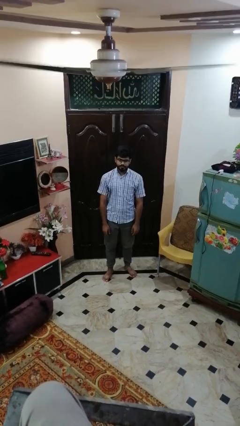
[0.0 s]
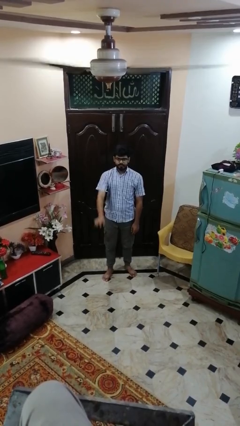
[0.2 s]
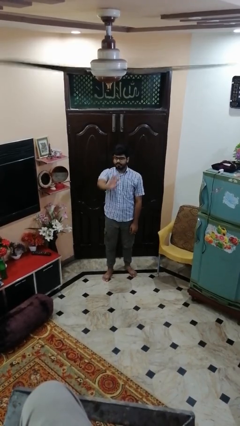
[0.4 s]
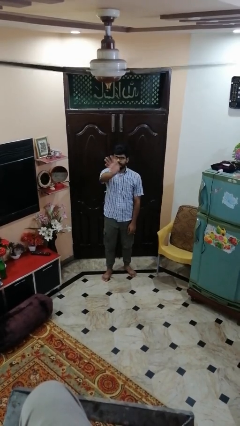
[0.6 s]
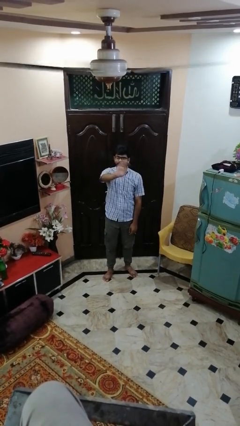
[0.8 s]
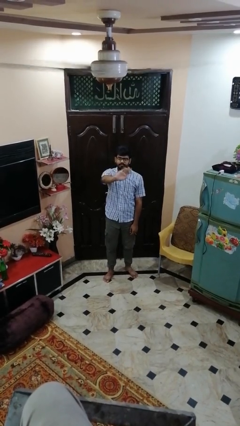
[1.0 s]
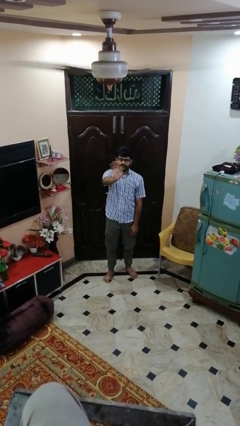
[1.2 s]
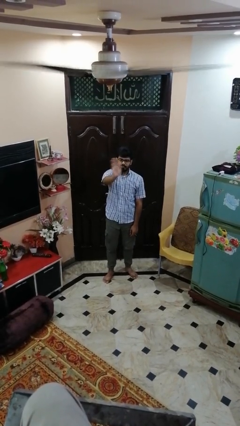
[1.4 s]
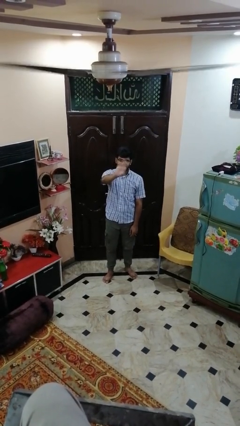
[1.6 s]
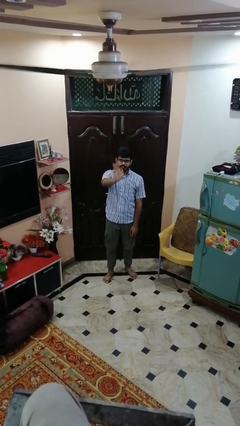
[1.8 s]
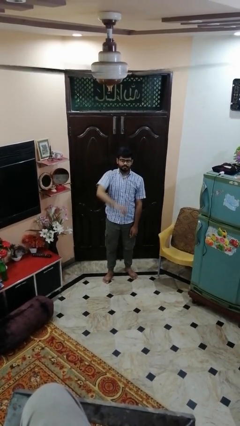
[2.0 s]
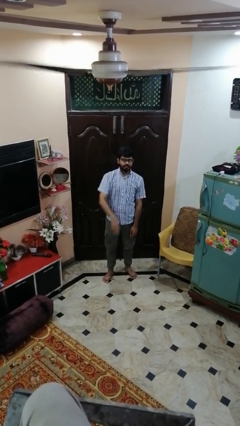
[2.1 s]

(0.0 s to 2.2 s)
person waves at person

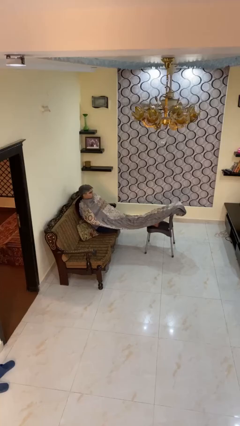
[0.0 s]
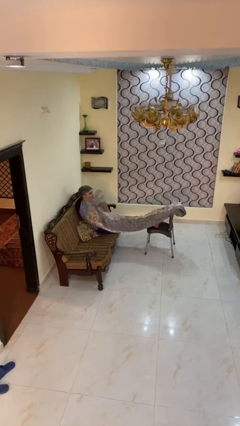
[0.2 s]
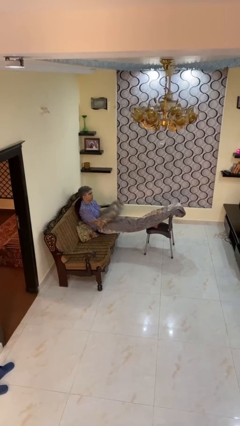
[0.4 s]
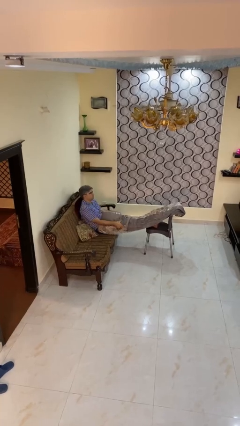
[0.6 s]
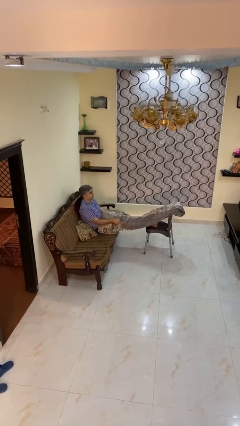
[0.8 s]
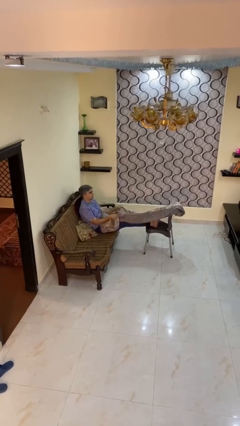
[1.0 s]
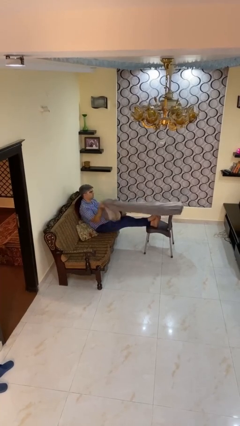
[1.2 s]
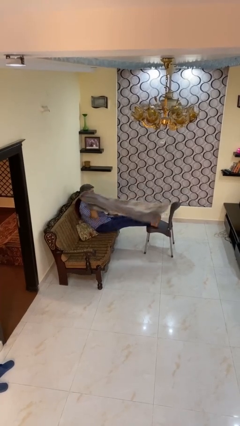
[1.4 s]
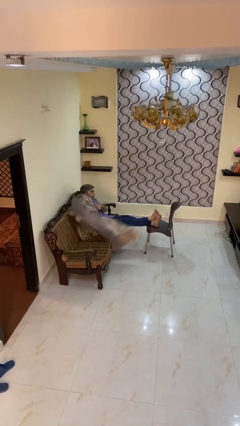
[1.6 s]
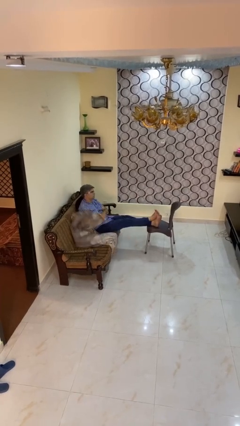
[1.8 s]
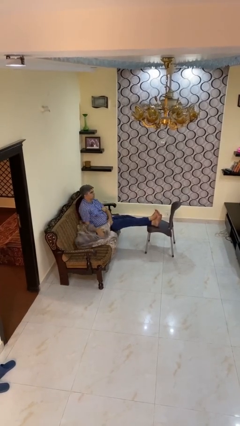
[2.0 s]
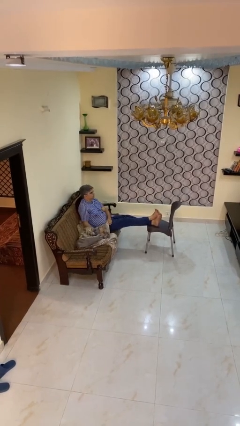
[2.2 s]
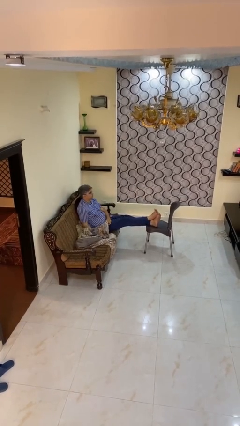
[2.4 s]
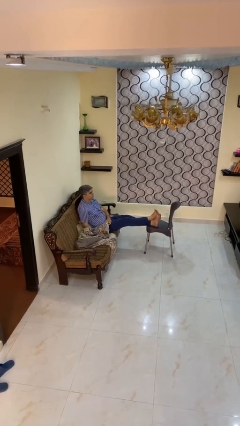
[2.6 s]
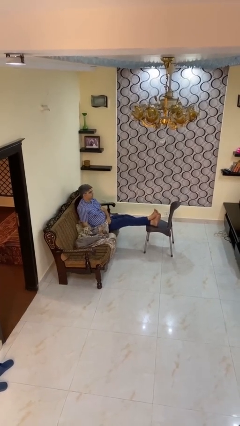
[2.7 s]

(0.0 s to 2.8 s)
person uncovers with blanket

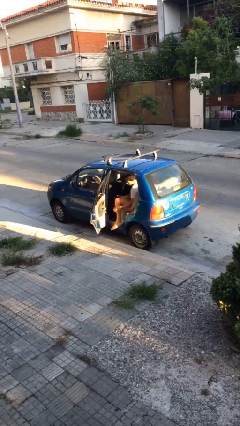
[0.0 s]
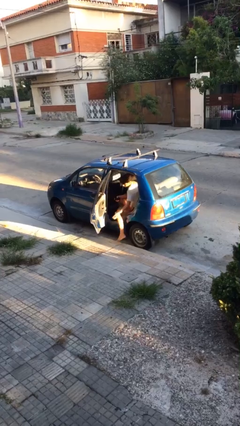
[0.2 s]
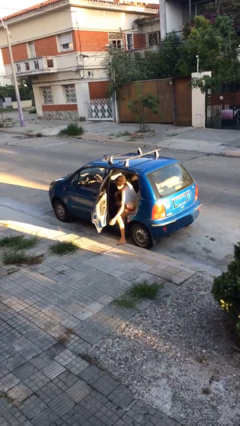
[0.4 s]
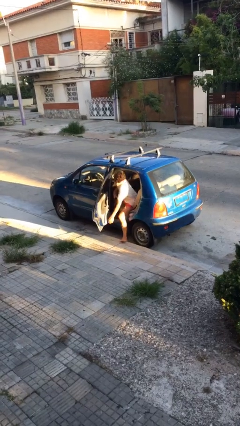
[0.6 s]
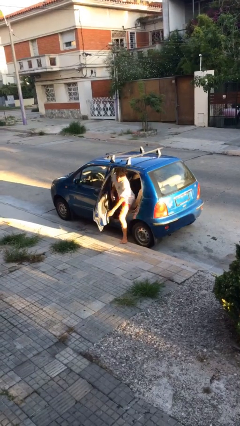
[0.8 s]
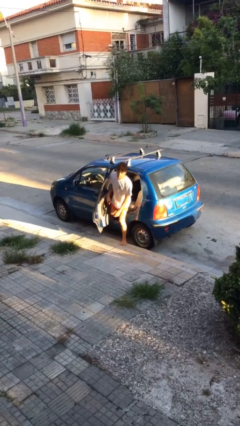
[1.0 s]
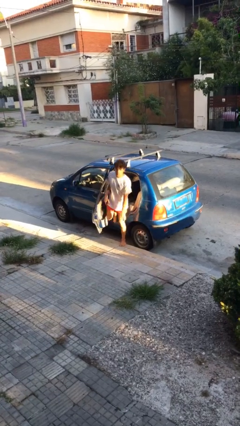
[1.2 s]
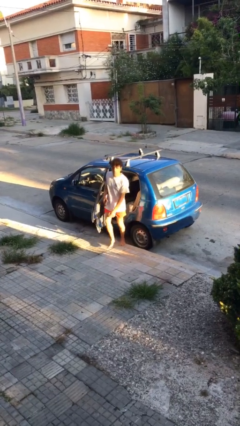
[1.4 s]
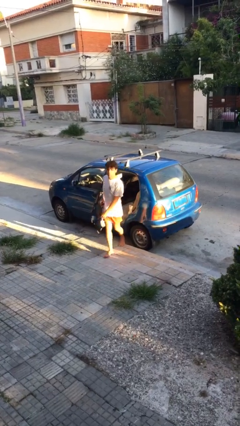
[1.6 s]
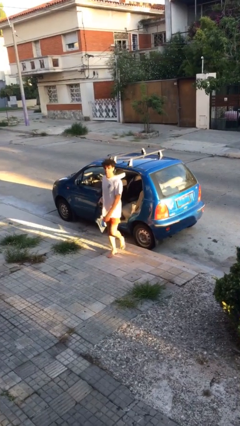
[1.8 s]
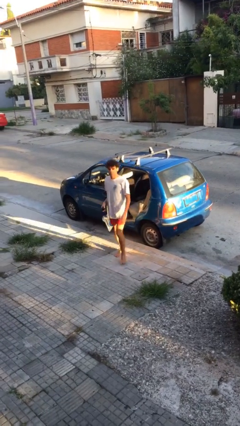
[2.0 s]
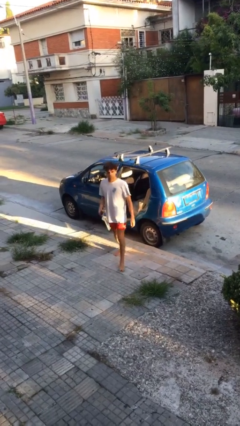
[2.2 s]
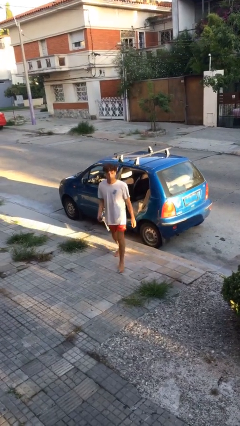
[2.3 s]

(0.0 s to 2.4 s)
person exits car

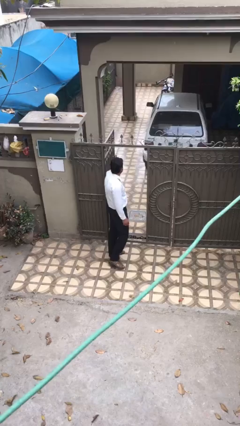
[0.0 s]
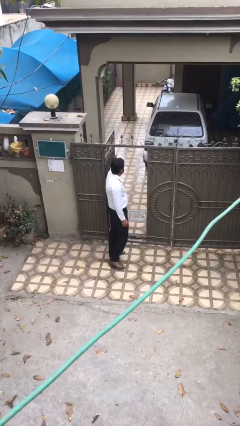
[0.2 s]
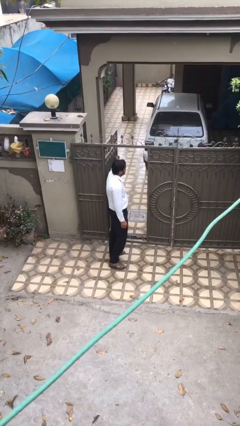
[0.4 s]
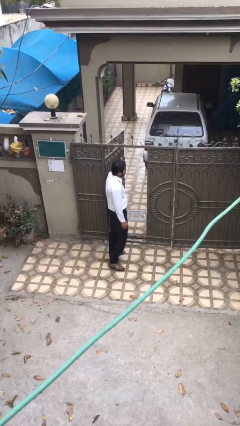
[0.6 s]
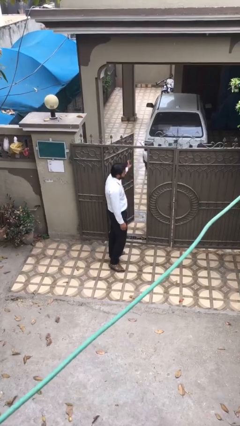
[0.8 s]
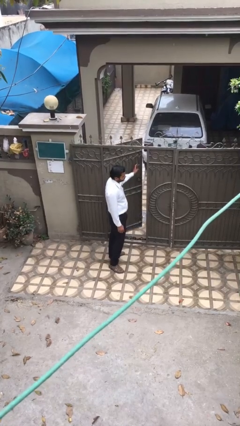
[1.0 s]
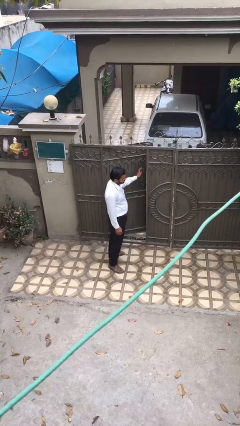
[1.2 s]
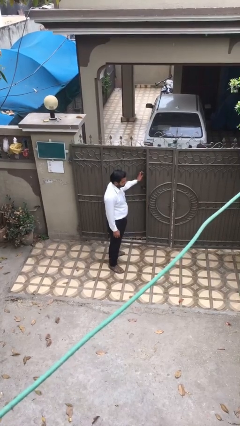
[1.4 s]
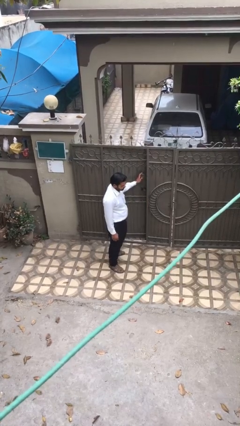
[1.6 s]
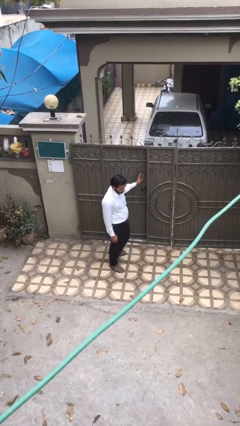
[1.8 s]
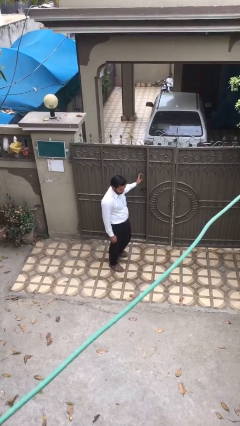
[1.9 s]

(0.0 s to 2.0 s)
person closes facility door

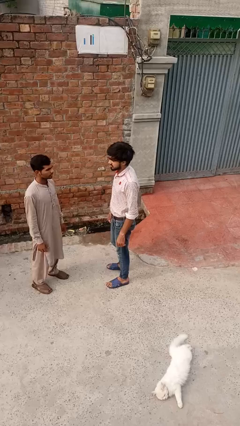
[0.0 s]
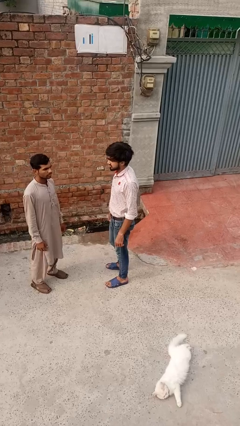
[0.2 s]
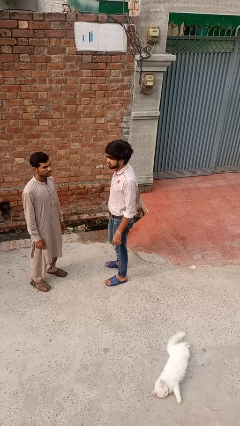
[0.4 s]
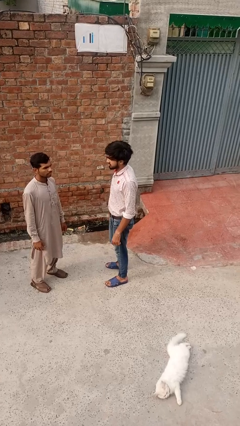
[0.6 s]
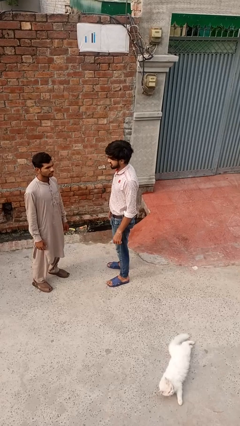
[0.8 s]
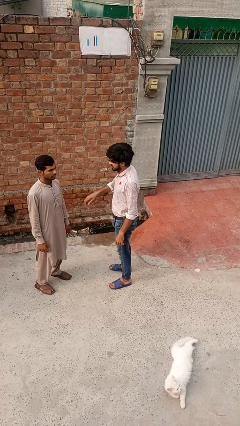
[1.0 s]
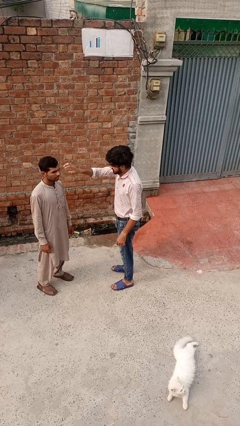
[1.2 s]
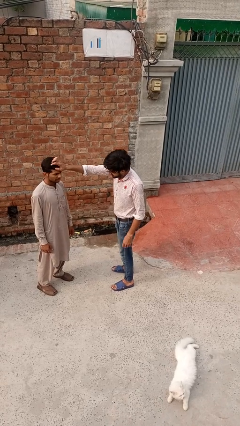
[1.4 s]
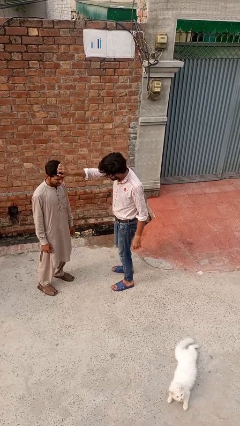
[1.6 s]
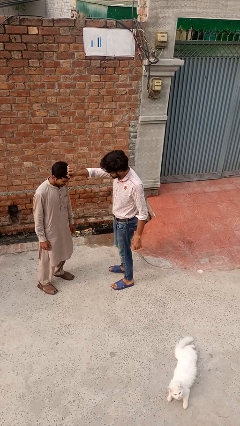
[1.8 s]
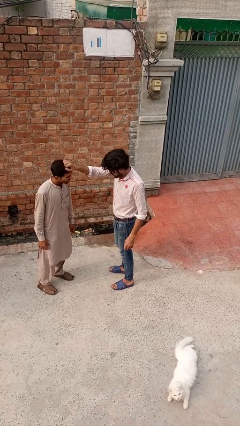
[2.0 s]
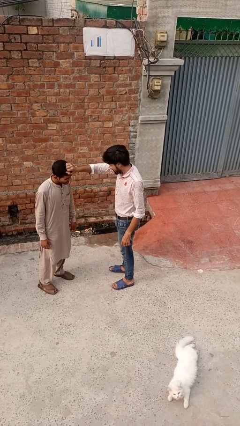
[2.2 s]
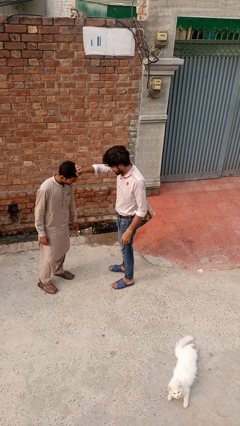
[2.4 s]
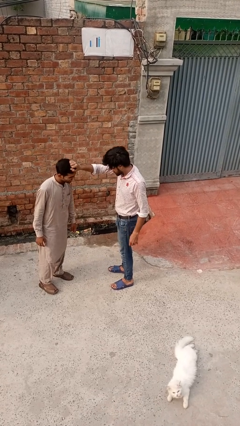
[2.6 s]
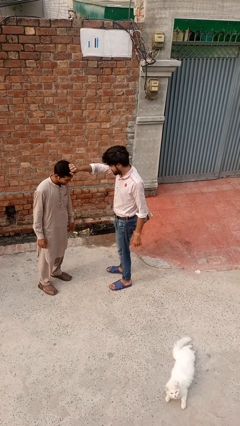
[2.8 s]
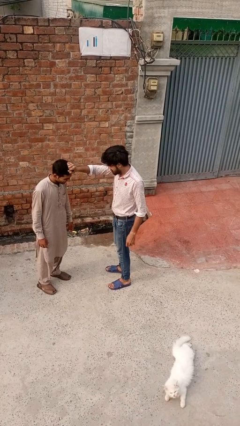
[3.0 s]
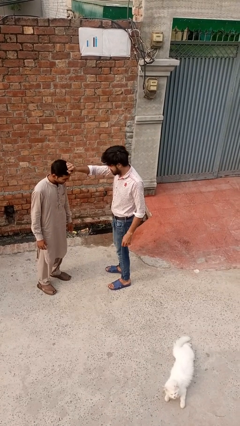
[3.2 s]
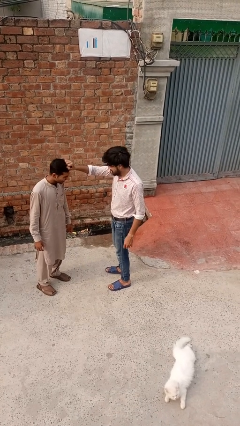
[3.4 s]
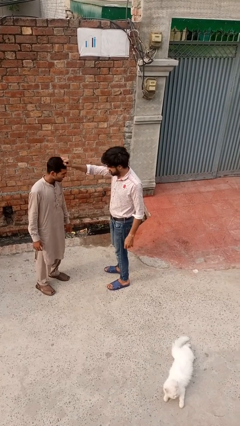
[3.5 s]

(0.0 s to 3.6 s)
person grabs person by hair

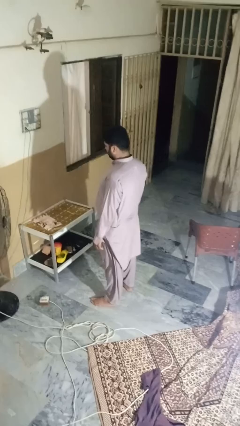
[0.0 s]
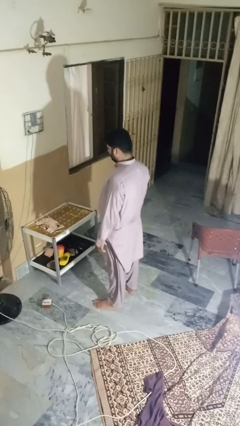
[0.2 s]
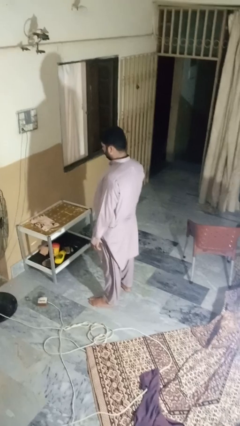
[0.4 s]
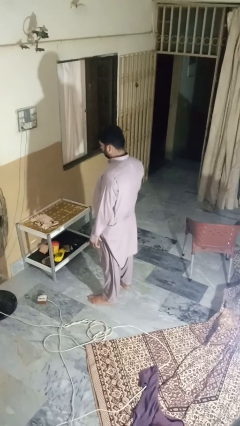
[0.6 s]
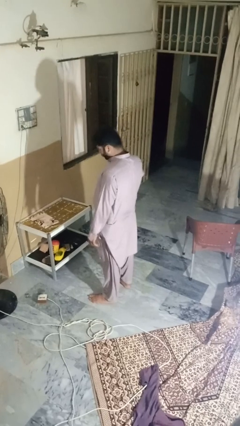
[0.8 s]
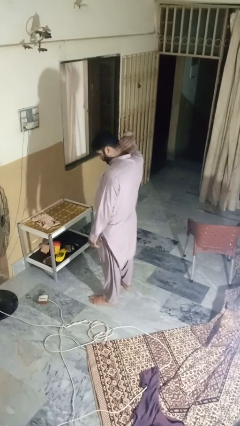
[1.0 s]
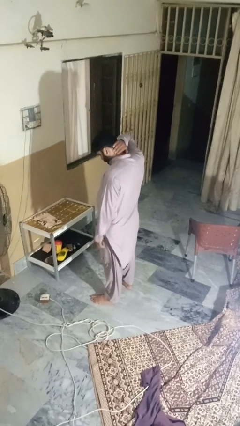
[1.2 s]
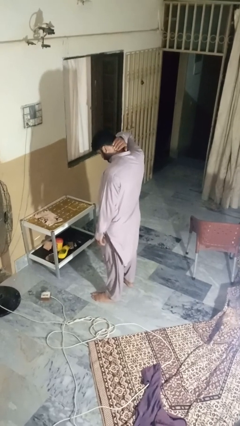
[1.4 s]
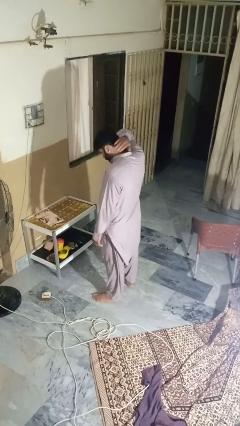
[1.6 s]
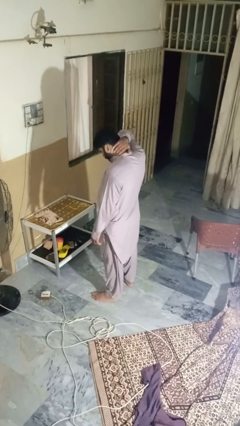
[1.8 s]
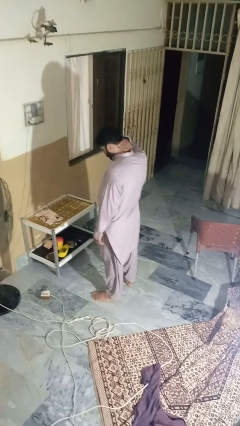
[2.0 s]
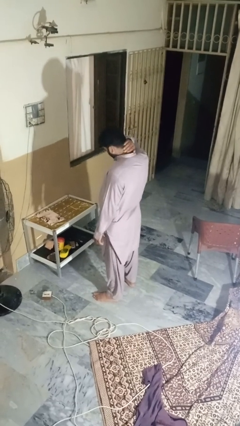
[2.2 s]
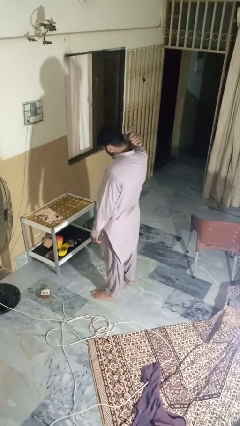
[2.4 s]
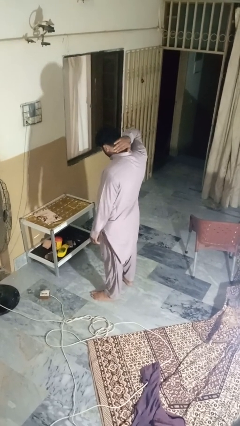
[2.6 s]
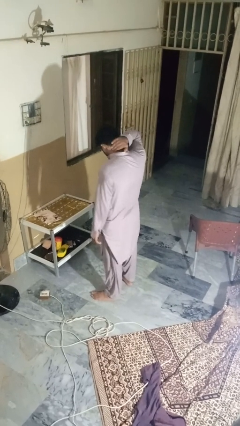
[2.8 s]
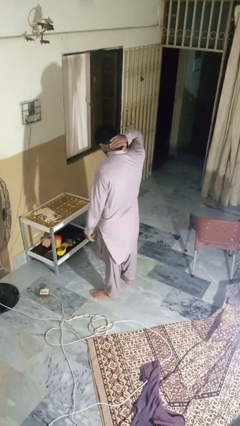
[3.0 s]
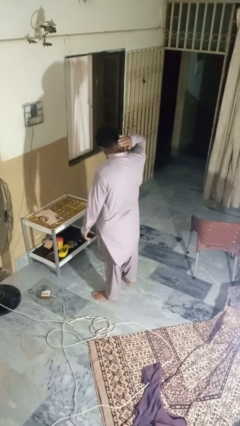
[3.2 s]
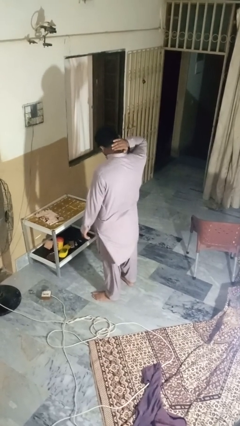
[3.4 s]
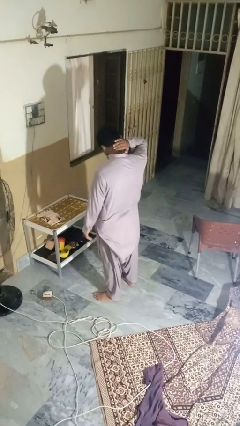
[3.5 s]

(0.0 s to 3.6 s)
person rubs neck

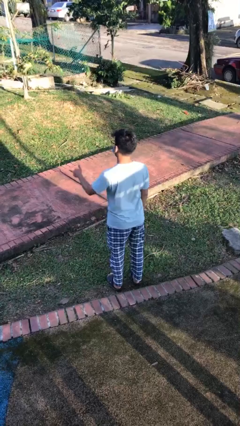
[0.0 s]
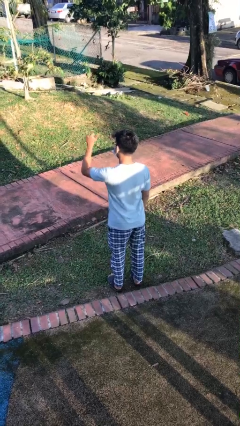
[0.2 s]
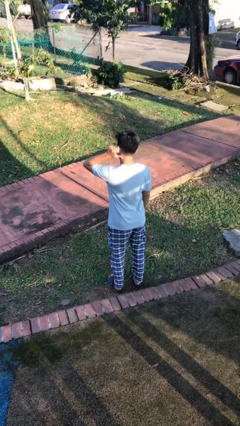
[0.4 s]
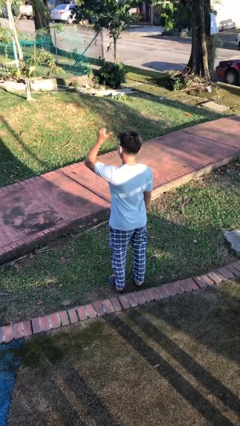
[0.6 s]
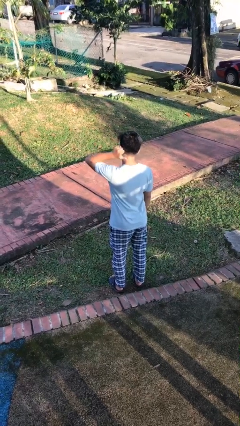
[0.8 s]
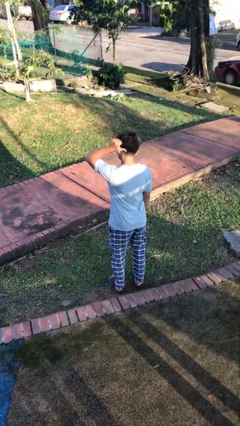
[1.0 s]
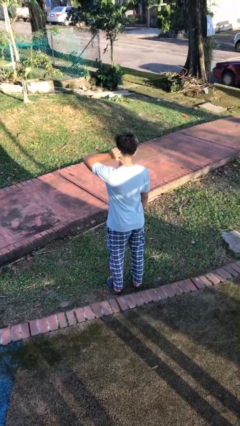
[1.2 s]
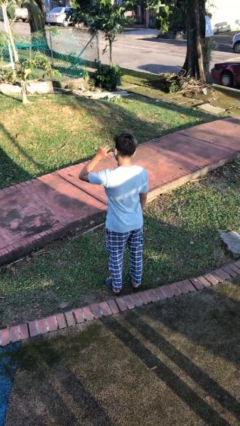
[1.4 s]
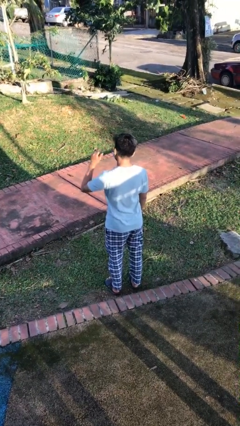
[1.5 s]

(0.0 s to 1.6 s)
person gestures behind me
